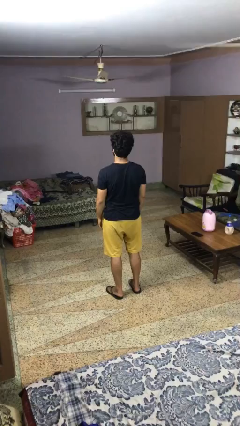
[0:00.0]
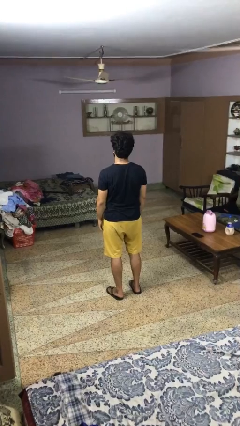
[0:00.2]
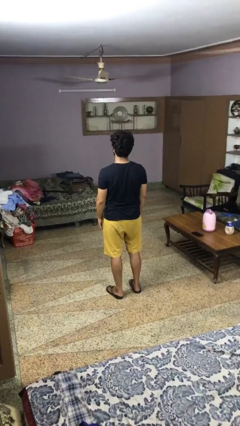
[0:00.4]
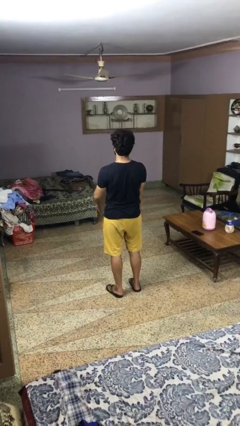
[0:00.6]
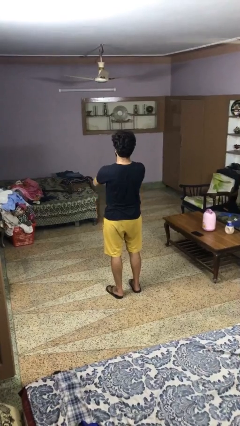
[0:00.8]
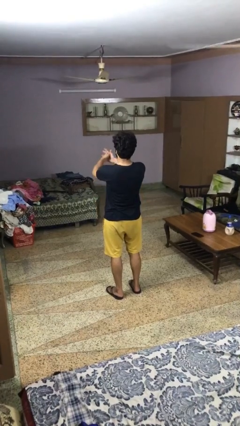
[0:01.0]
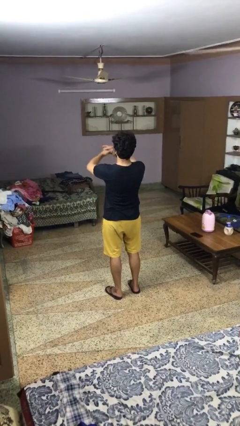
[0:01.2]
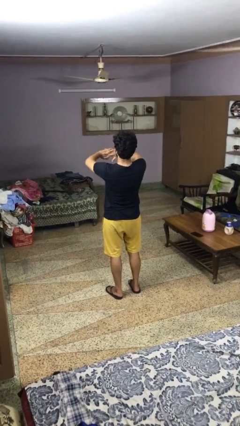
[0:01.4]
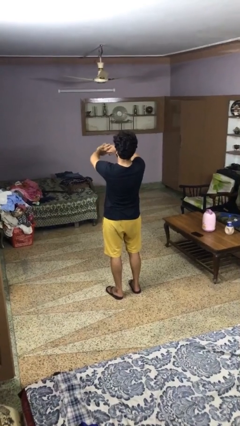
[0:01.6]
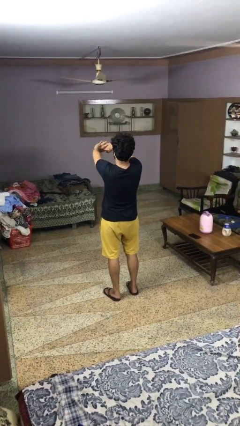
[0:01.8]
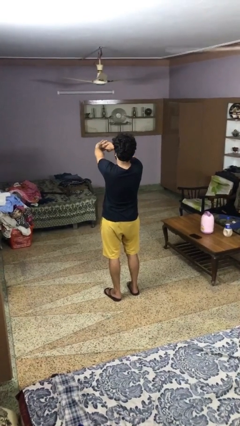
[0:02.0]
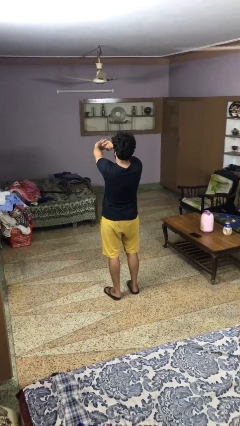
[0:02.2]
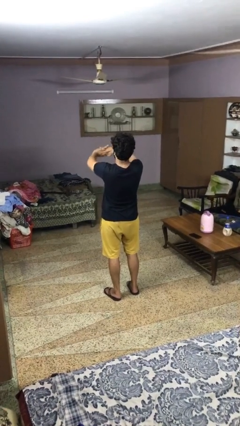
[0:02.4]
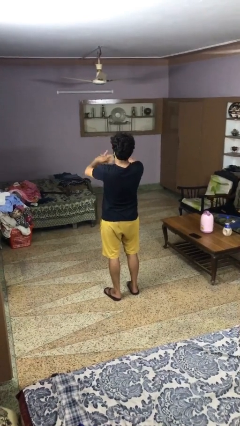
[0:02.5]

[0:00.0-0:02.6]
person cracks knuckles

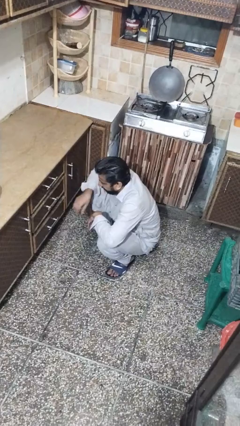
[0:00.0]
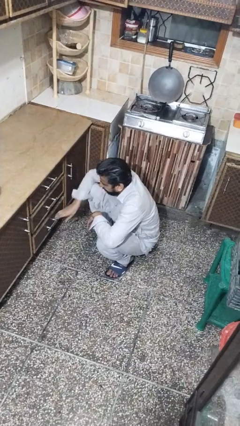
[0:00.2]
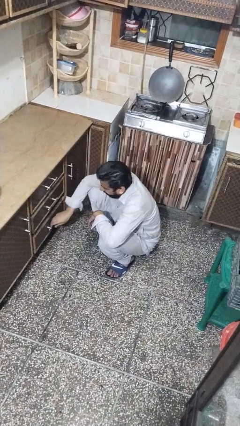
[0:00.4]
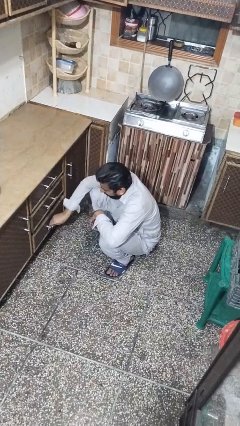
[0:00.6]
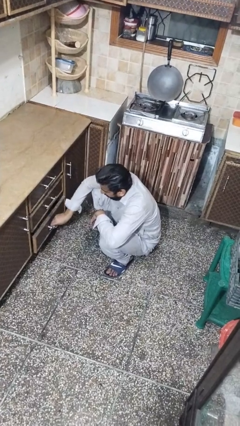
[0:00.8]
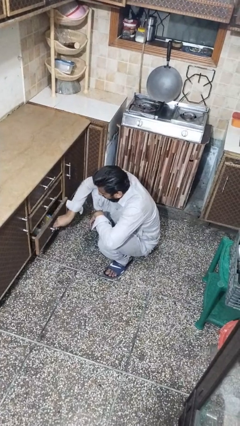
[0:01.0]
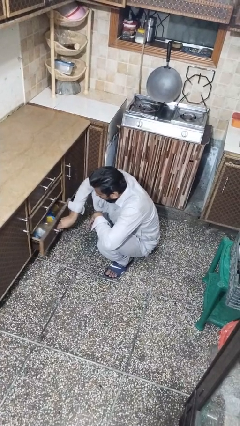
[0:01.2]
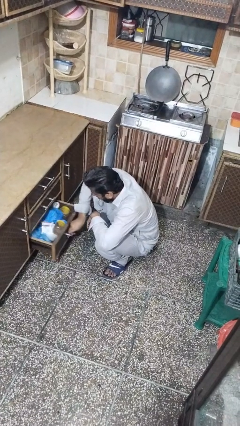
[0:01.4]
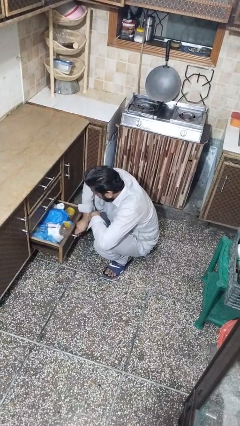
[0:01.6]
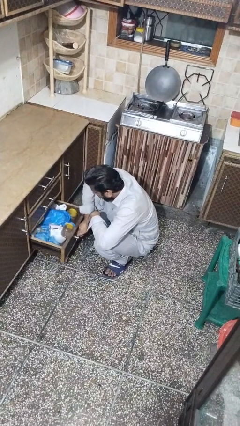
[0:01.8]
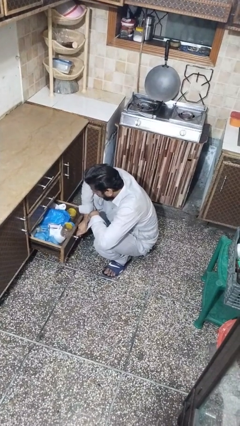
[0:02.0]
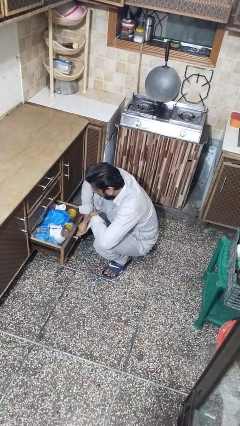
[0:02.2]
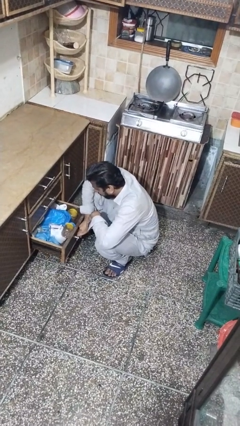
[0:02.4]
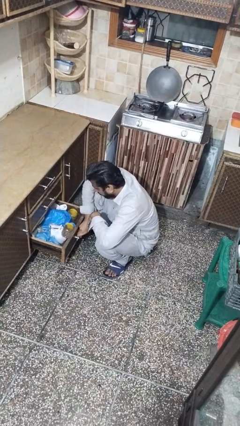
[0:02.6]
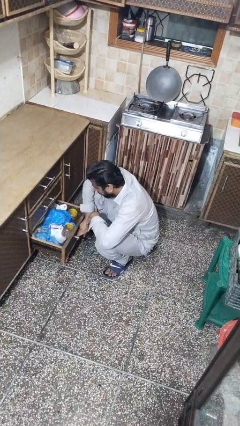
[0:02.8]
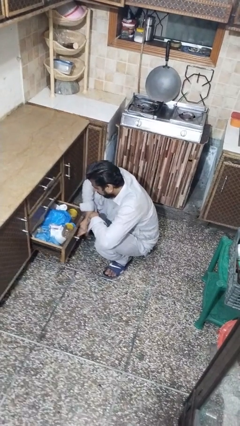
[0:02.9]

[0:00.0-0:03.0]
person opens kitchen drawer

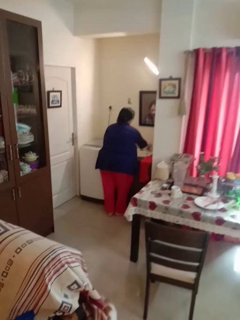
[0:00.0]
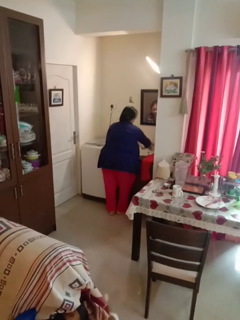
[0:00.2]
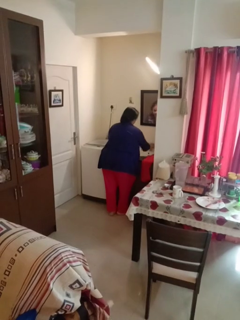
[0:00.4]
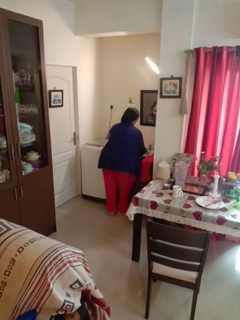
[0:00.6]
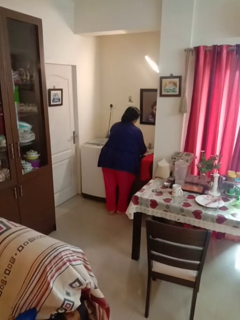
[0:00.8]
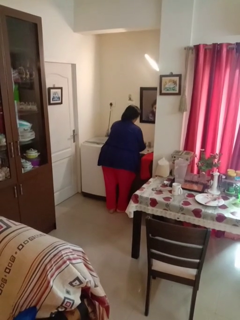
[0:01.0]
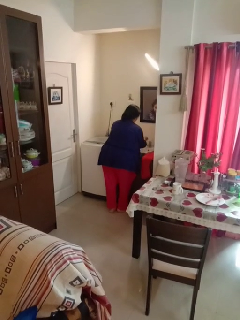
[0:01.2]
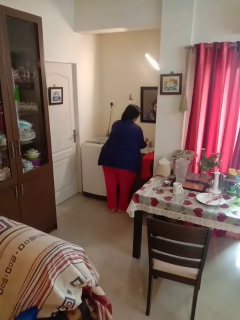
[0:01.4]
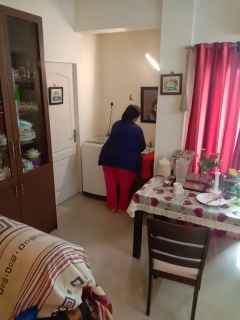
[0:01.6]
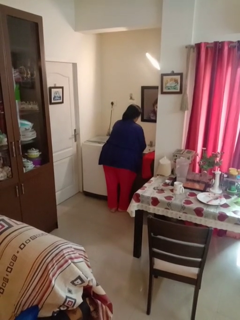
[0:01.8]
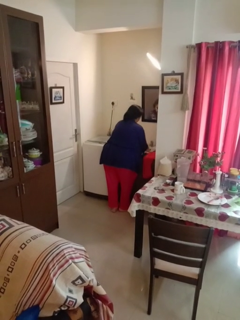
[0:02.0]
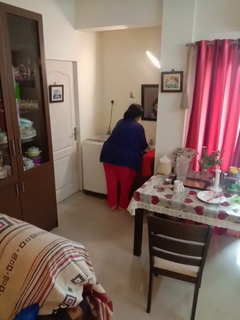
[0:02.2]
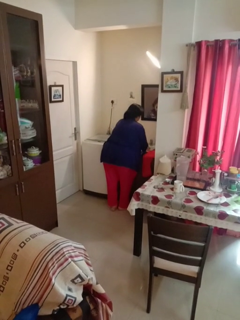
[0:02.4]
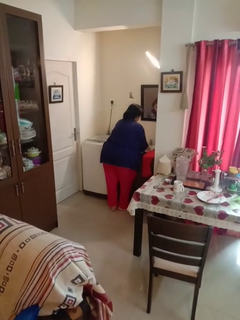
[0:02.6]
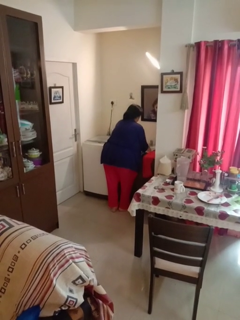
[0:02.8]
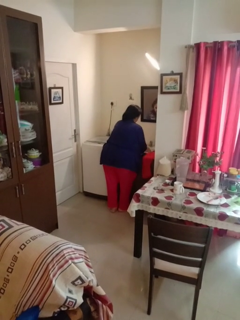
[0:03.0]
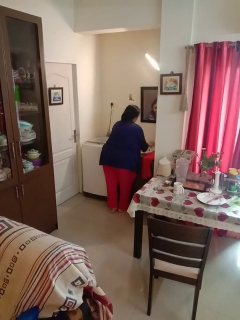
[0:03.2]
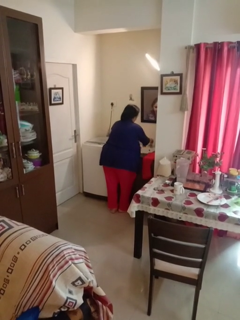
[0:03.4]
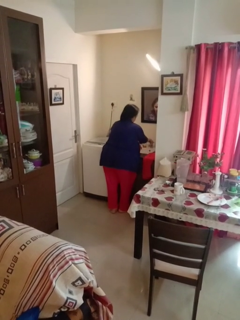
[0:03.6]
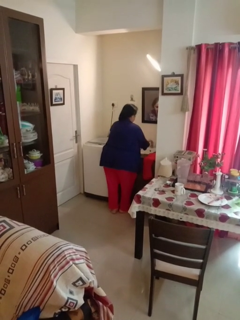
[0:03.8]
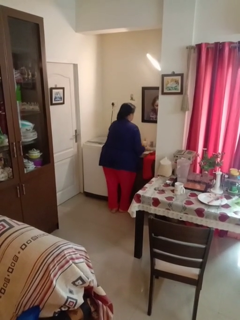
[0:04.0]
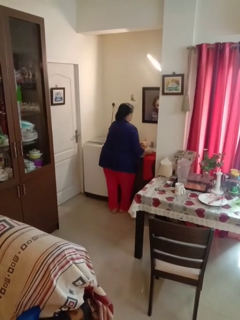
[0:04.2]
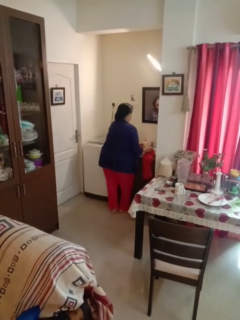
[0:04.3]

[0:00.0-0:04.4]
person washes hands

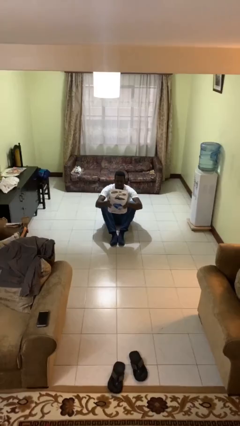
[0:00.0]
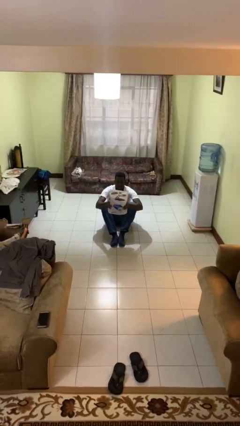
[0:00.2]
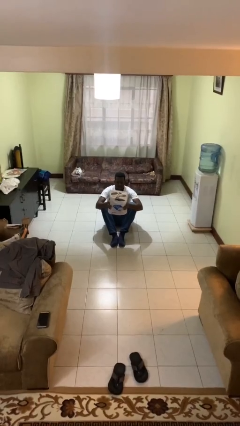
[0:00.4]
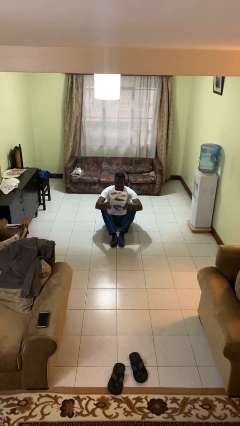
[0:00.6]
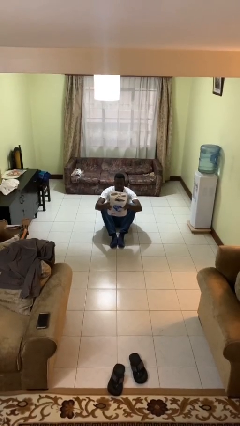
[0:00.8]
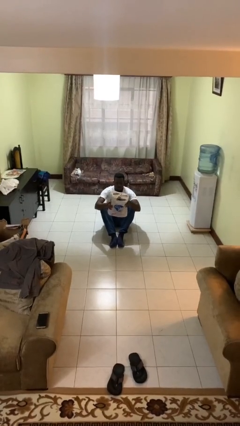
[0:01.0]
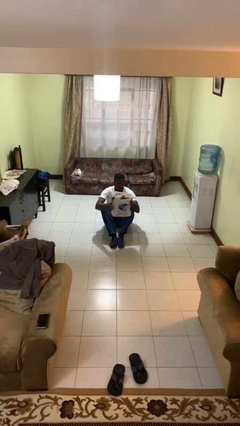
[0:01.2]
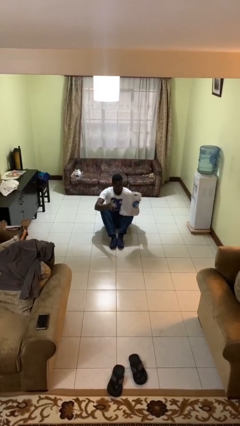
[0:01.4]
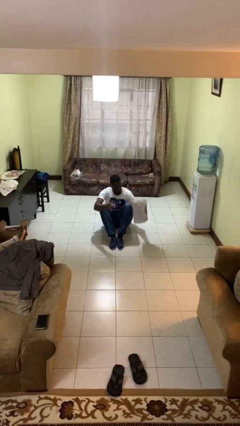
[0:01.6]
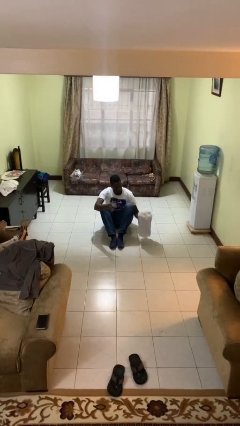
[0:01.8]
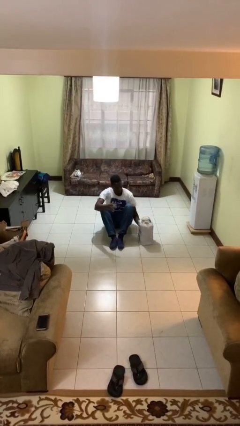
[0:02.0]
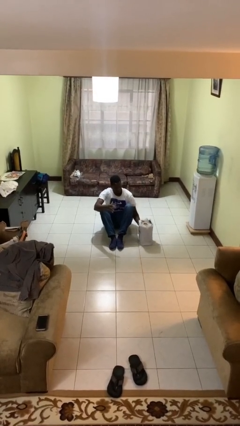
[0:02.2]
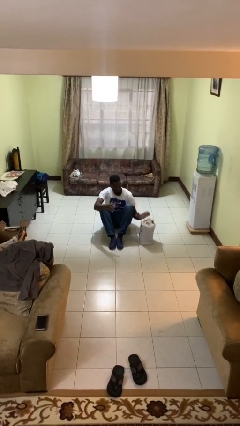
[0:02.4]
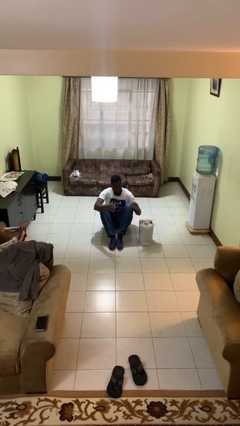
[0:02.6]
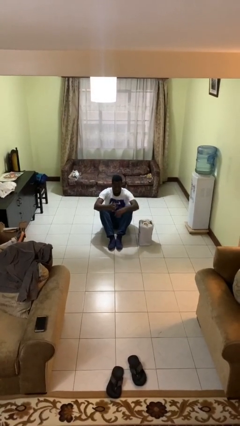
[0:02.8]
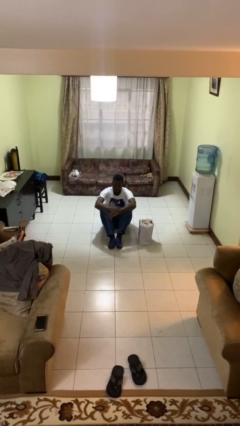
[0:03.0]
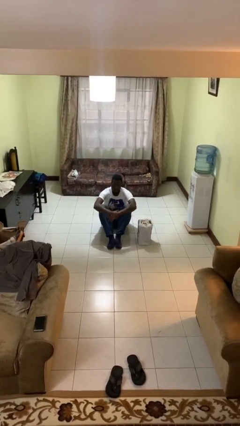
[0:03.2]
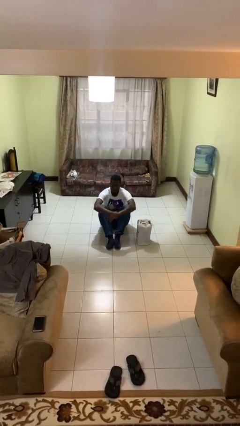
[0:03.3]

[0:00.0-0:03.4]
person puts down object on floor

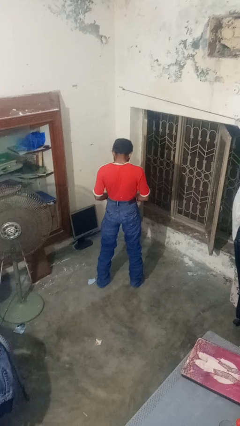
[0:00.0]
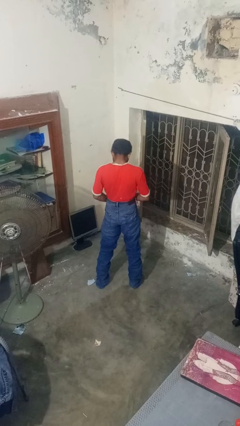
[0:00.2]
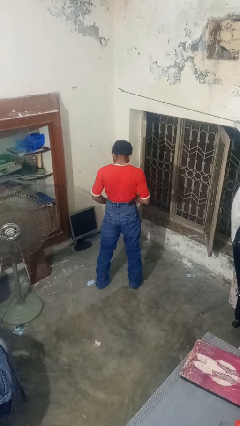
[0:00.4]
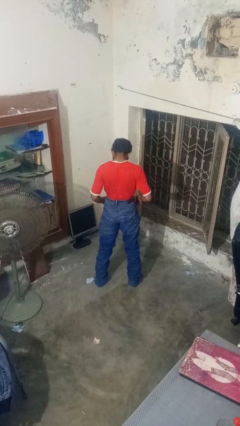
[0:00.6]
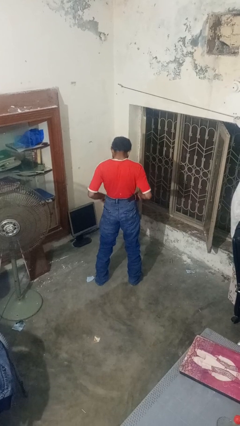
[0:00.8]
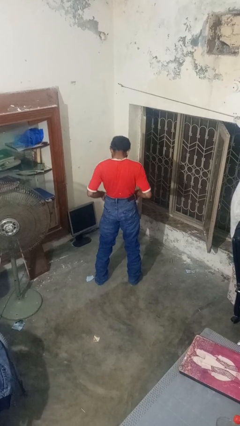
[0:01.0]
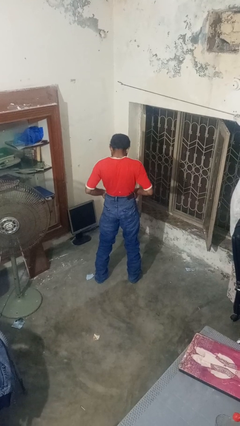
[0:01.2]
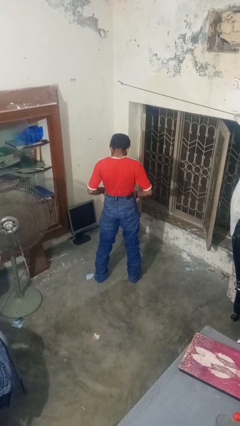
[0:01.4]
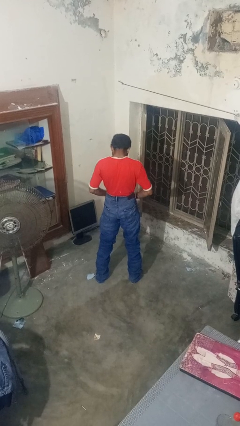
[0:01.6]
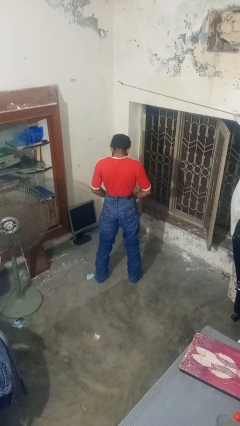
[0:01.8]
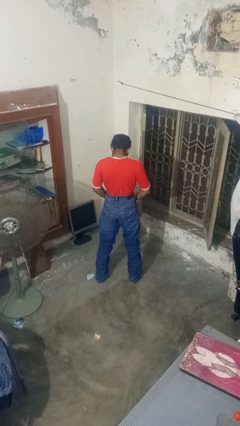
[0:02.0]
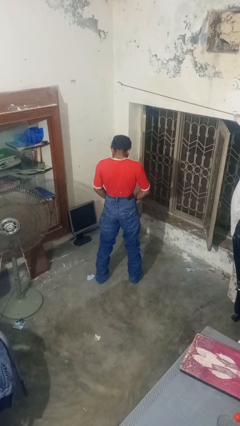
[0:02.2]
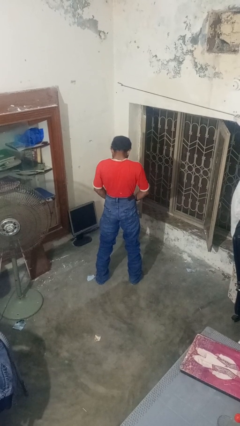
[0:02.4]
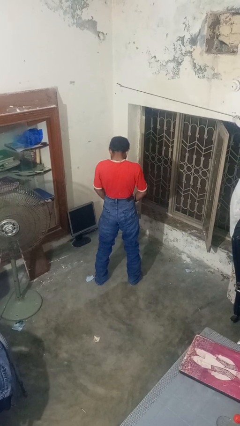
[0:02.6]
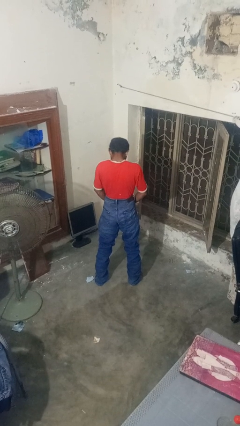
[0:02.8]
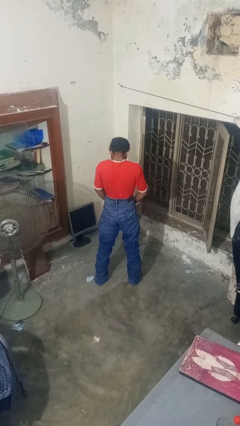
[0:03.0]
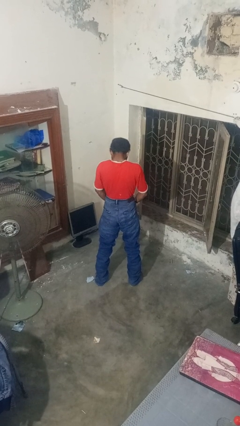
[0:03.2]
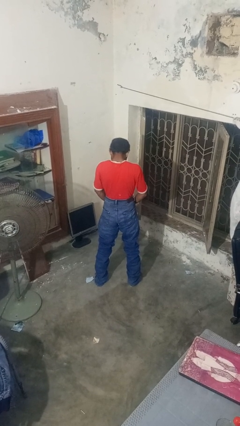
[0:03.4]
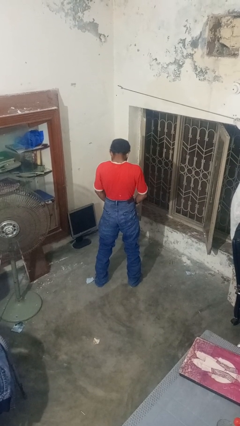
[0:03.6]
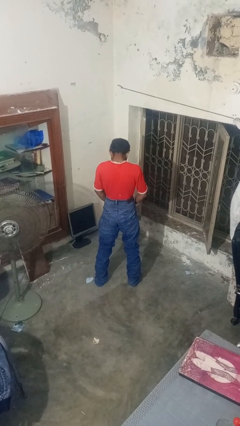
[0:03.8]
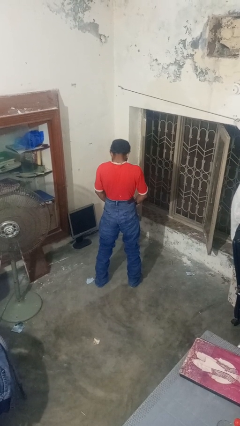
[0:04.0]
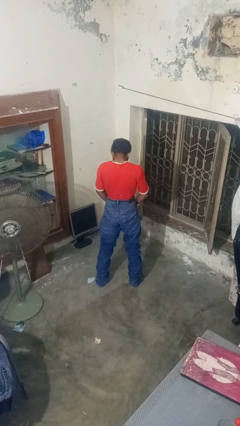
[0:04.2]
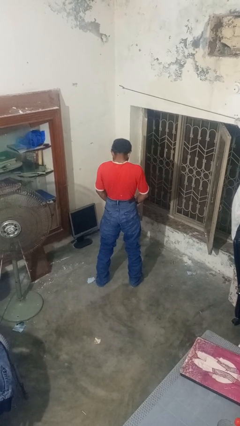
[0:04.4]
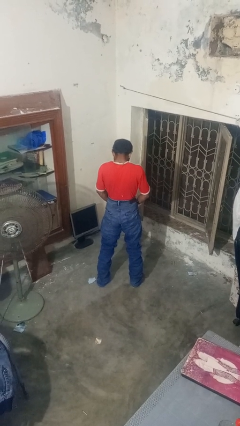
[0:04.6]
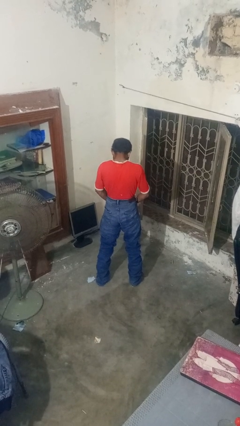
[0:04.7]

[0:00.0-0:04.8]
person puts hands in back pockets

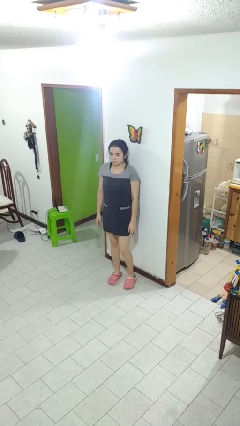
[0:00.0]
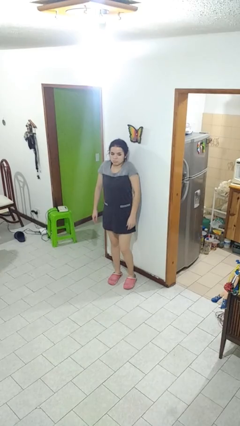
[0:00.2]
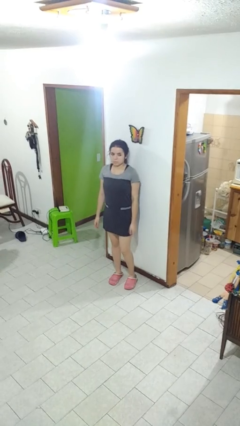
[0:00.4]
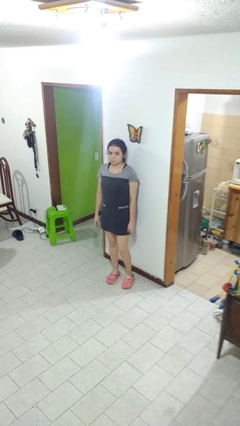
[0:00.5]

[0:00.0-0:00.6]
person shrugs
